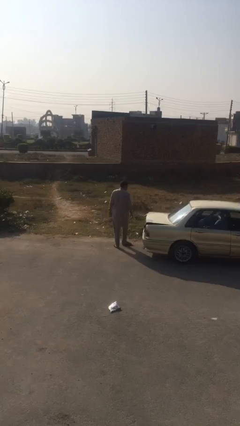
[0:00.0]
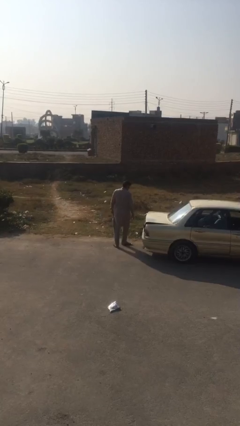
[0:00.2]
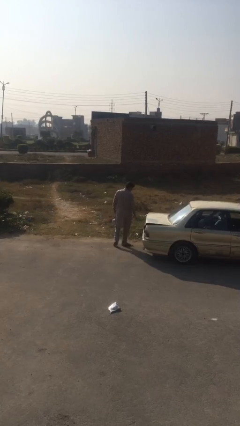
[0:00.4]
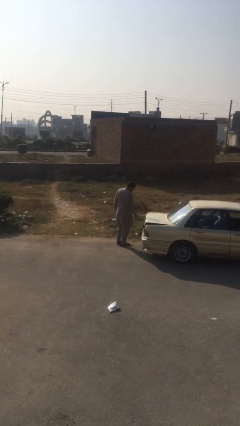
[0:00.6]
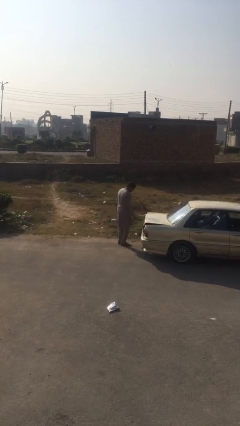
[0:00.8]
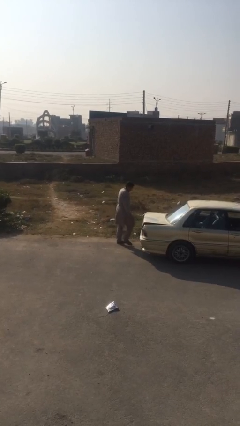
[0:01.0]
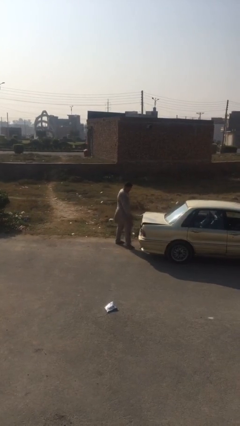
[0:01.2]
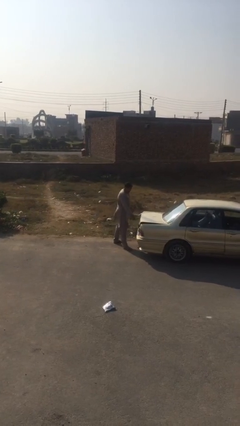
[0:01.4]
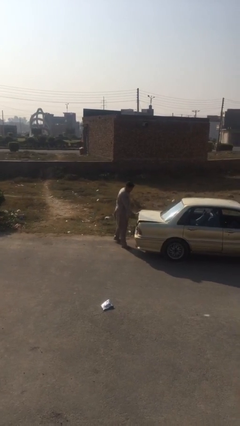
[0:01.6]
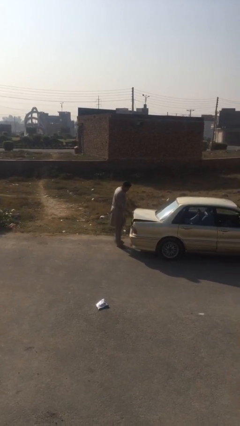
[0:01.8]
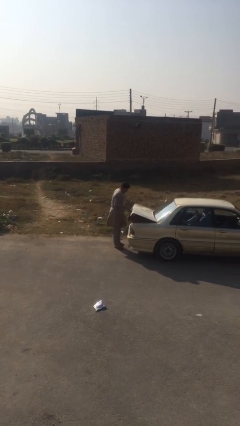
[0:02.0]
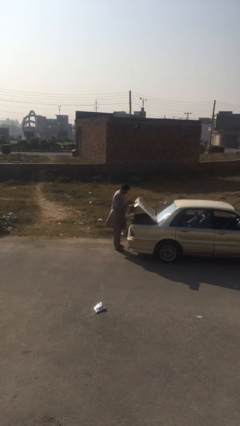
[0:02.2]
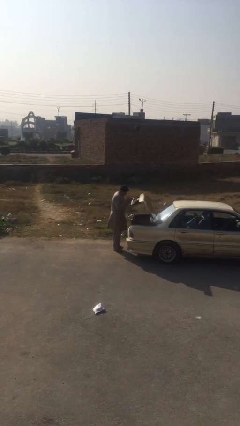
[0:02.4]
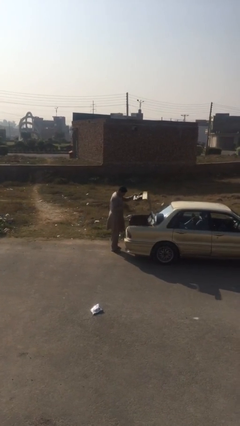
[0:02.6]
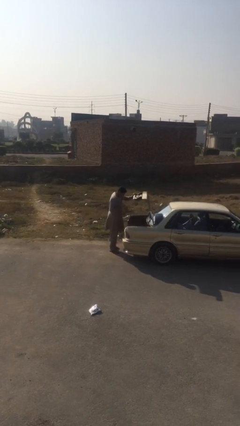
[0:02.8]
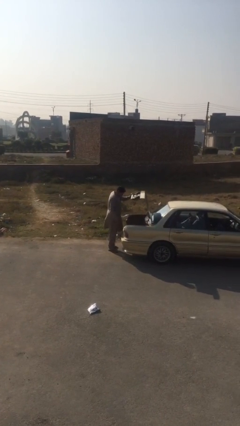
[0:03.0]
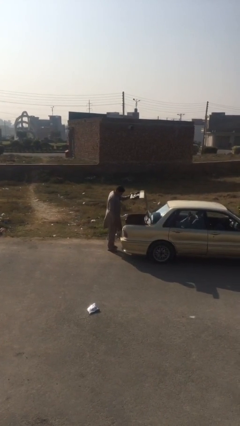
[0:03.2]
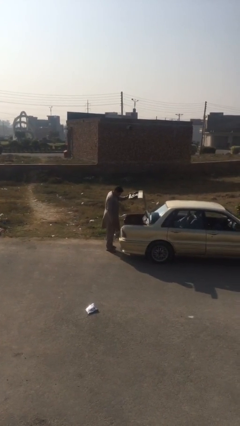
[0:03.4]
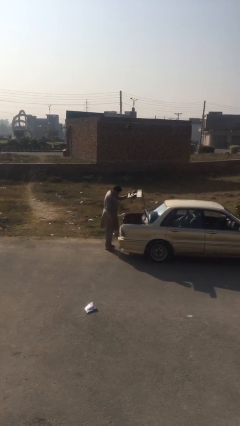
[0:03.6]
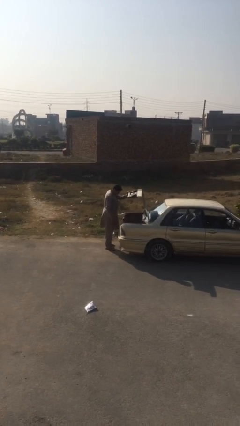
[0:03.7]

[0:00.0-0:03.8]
person opens car trunk

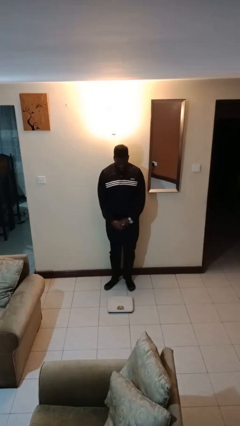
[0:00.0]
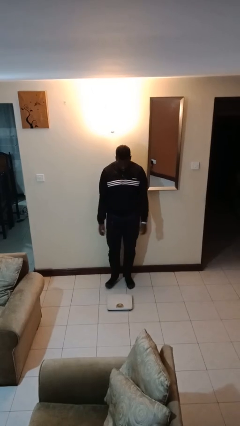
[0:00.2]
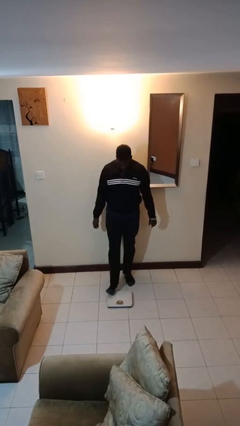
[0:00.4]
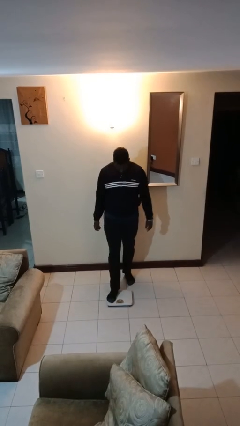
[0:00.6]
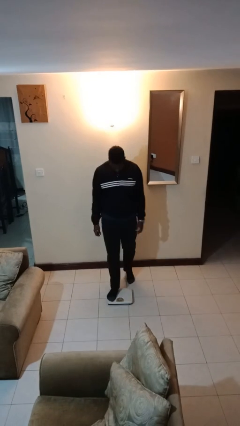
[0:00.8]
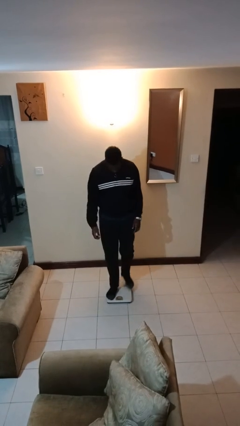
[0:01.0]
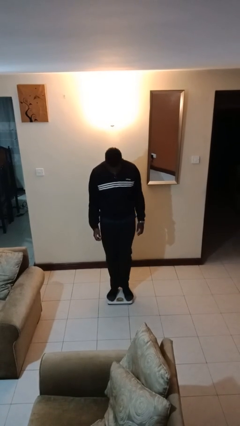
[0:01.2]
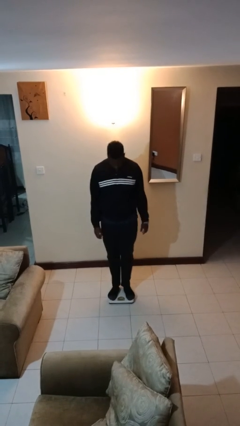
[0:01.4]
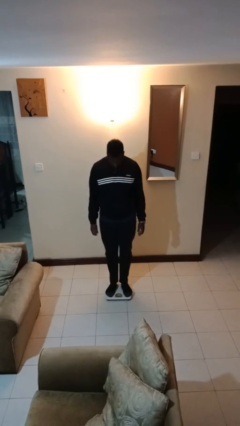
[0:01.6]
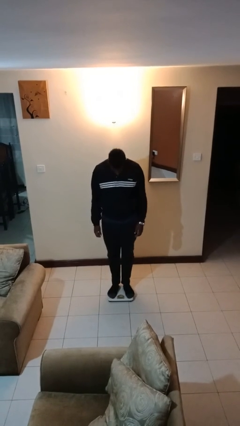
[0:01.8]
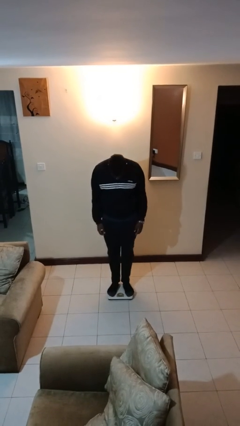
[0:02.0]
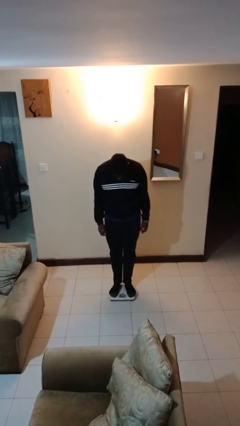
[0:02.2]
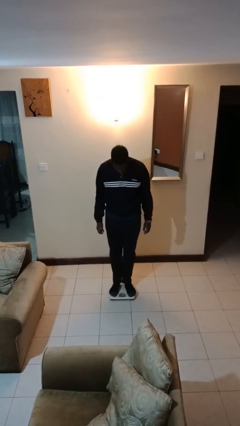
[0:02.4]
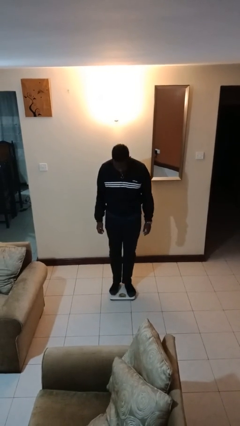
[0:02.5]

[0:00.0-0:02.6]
person uses bodyweight scale

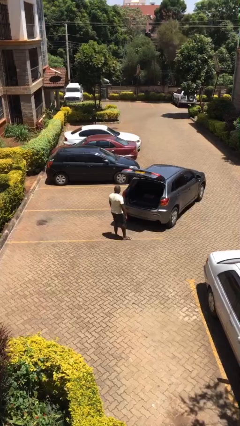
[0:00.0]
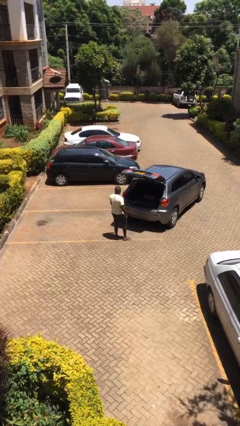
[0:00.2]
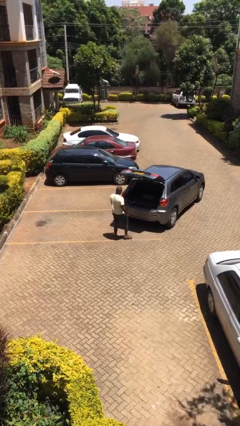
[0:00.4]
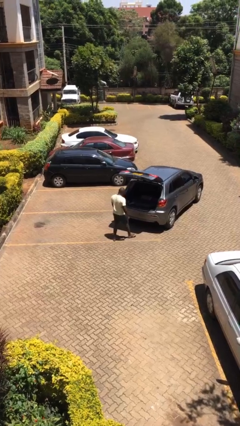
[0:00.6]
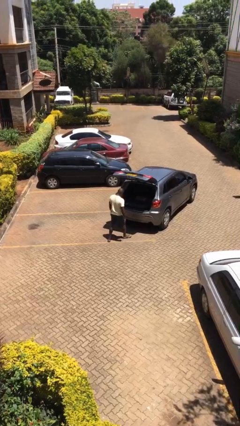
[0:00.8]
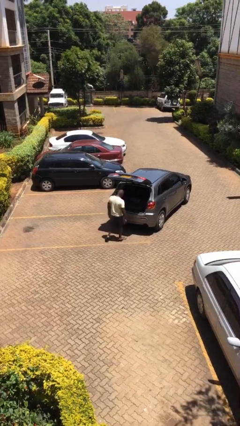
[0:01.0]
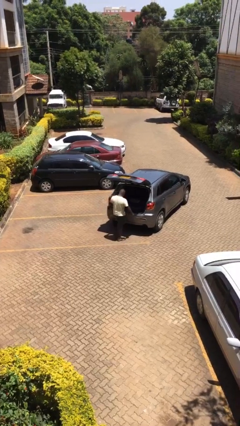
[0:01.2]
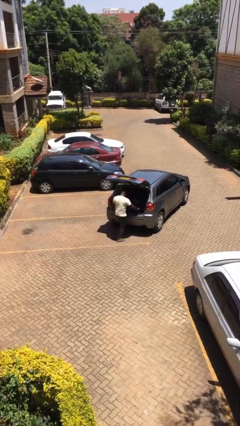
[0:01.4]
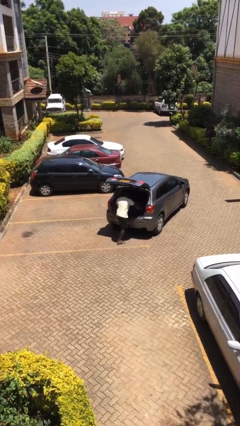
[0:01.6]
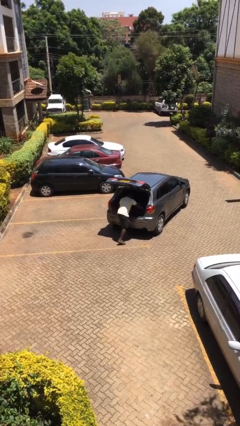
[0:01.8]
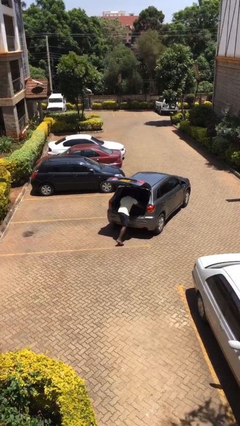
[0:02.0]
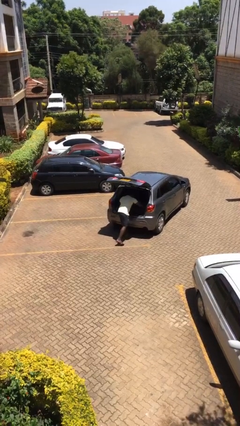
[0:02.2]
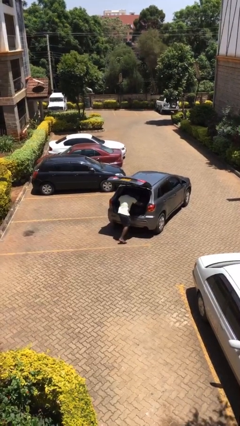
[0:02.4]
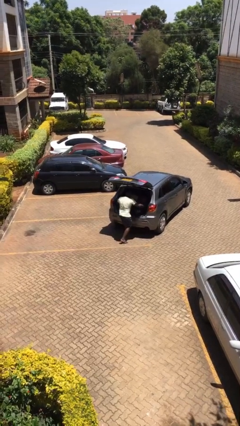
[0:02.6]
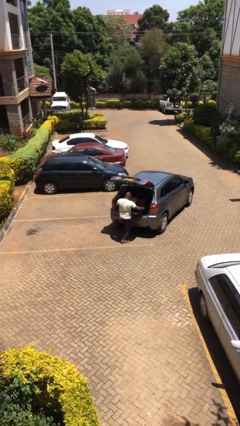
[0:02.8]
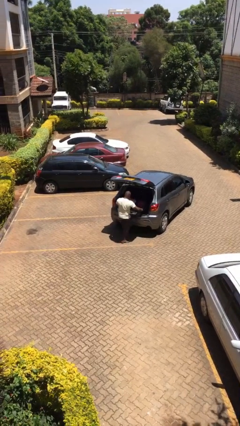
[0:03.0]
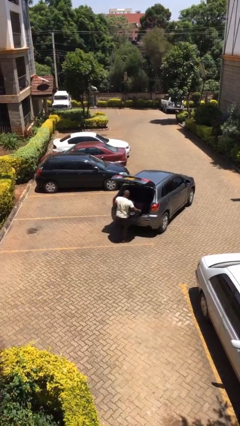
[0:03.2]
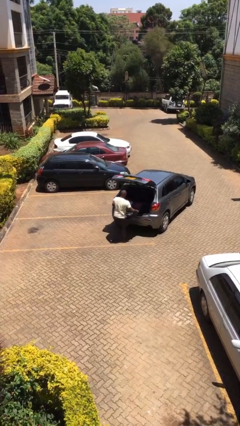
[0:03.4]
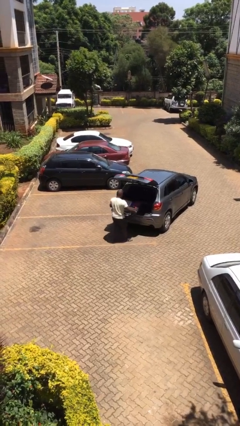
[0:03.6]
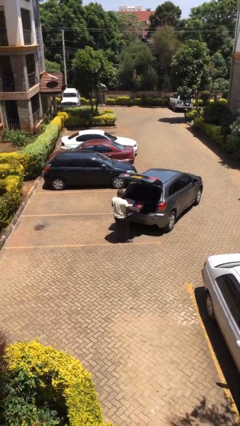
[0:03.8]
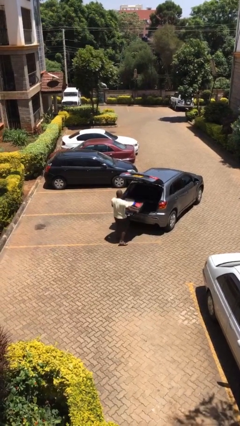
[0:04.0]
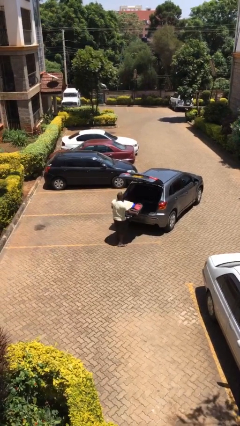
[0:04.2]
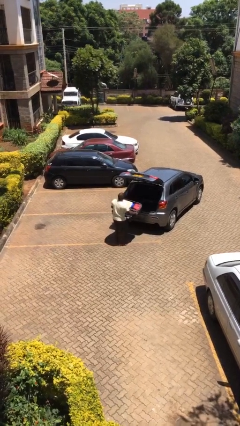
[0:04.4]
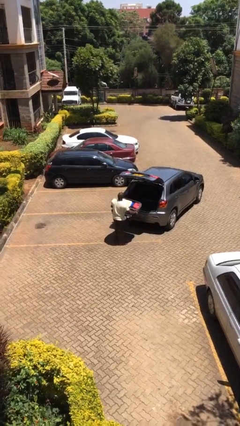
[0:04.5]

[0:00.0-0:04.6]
person unloads car

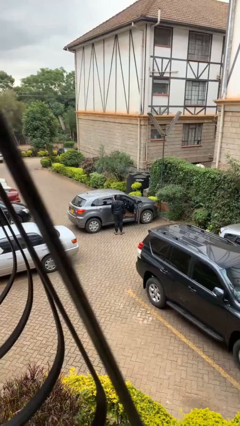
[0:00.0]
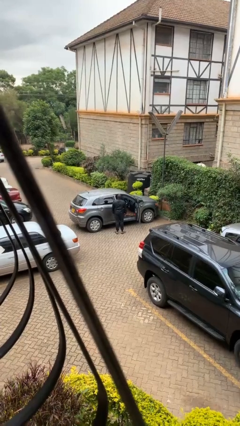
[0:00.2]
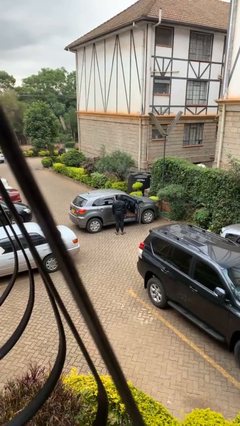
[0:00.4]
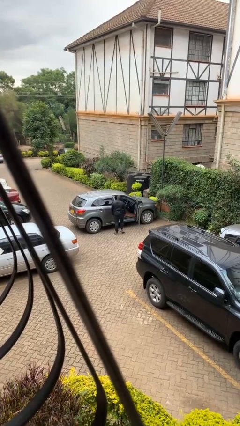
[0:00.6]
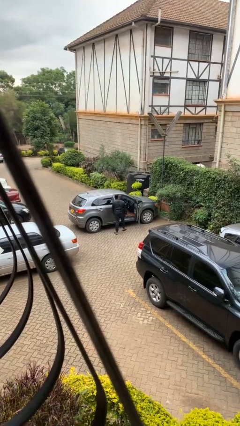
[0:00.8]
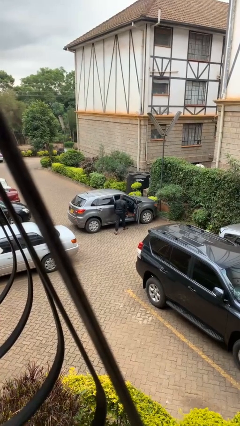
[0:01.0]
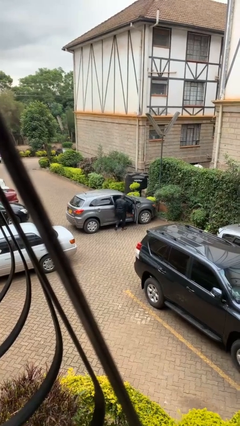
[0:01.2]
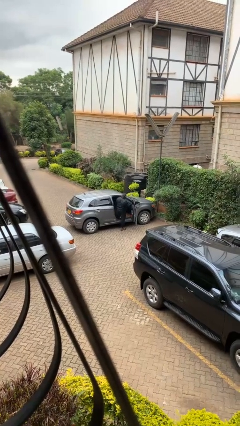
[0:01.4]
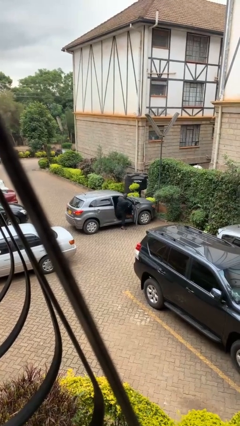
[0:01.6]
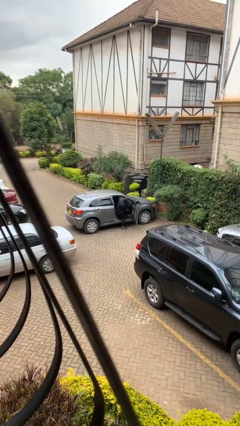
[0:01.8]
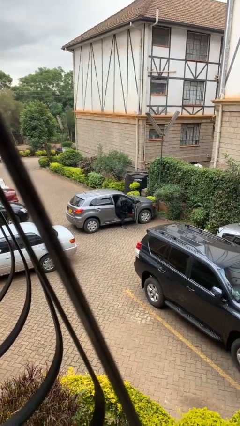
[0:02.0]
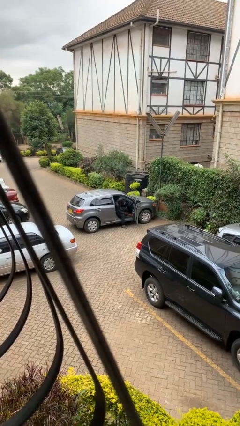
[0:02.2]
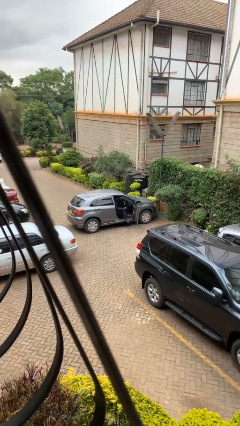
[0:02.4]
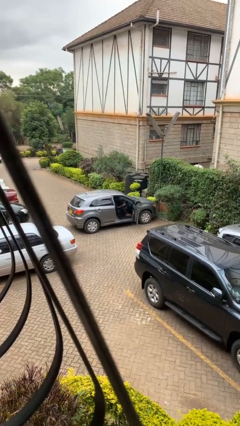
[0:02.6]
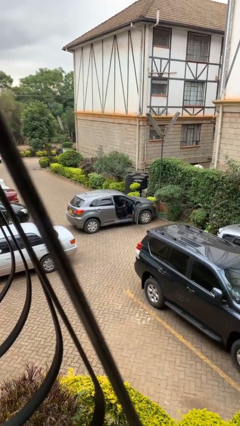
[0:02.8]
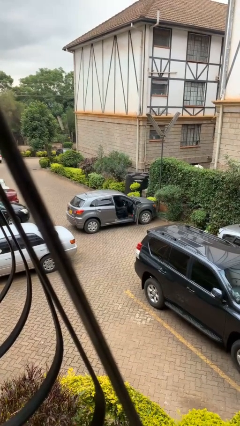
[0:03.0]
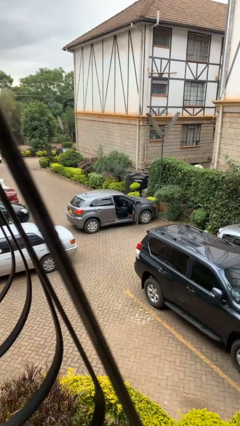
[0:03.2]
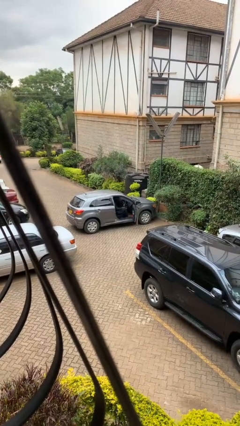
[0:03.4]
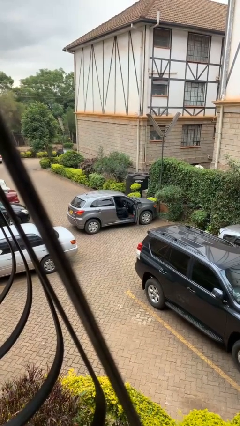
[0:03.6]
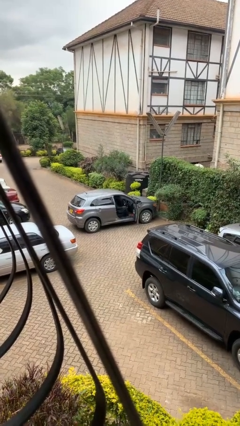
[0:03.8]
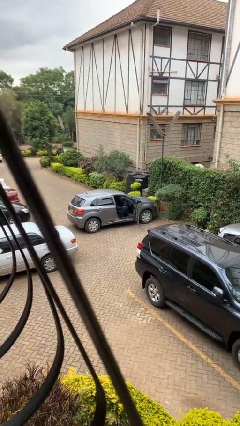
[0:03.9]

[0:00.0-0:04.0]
person enters car

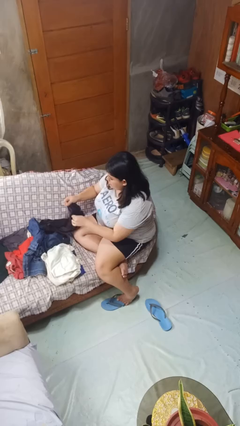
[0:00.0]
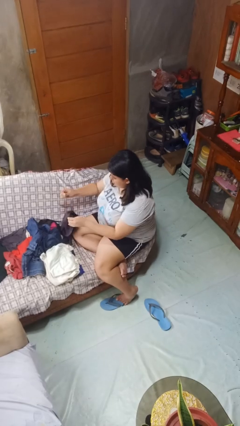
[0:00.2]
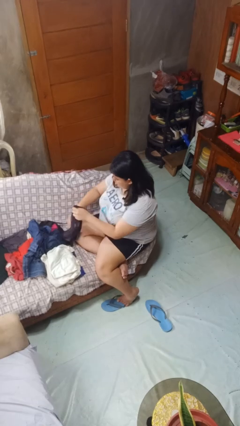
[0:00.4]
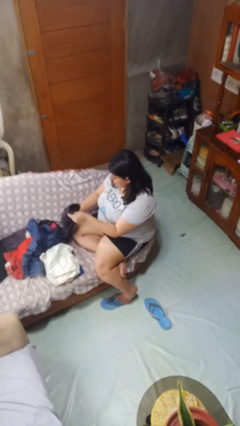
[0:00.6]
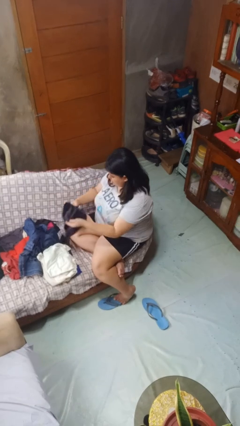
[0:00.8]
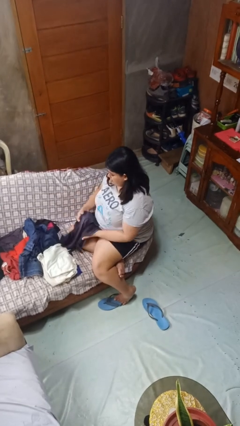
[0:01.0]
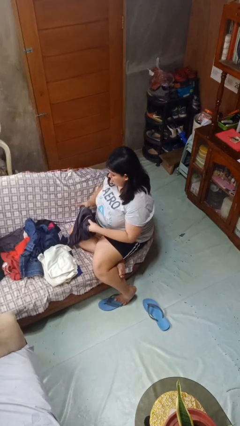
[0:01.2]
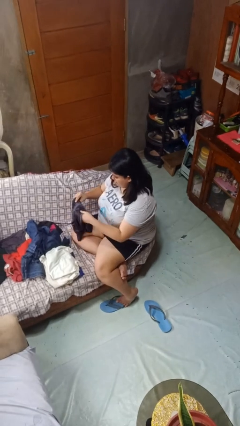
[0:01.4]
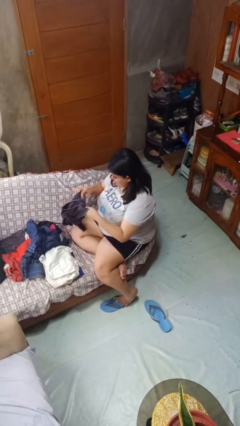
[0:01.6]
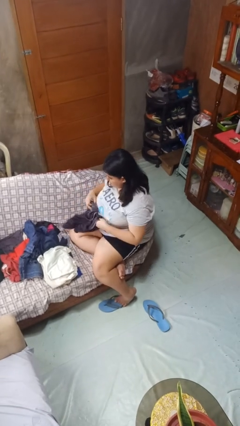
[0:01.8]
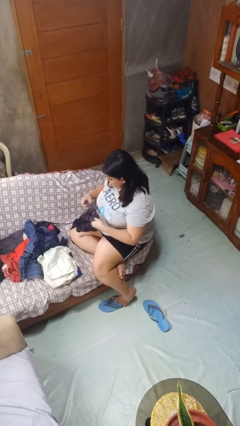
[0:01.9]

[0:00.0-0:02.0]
person folds shirt

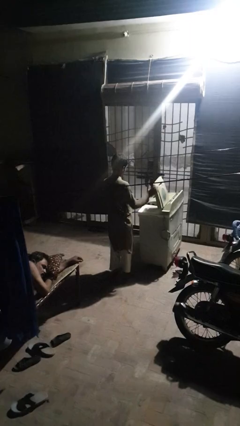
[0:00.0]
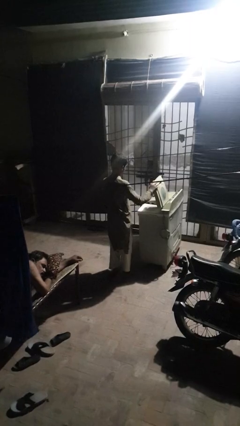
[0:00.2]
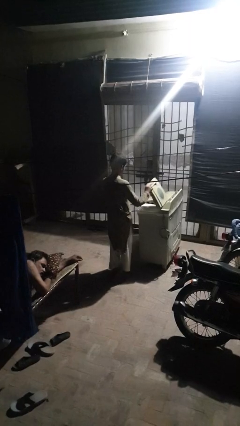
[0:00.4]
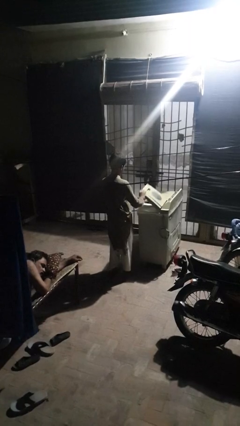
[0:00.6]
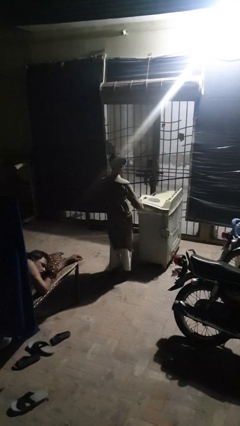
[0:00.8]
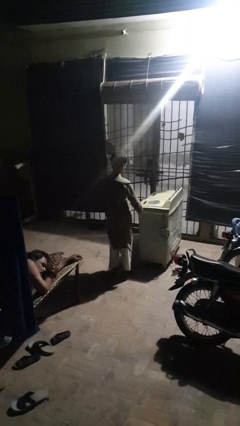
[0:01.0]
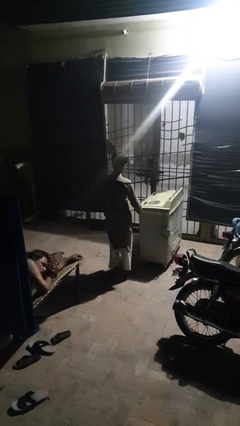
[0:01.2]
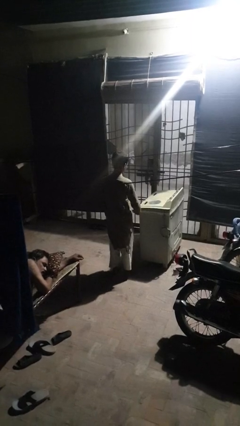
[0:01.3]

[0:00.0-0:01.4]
person closes clothes washer
